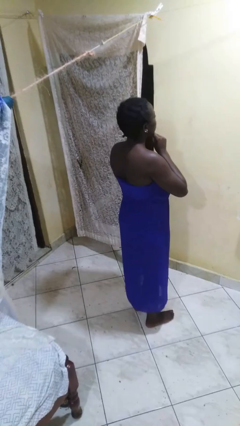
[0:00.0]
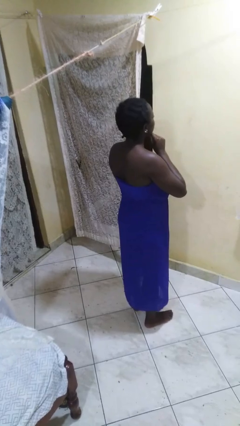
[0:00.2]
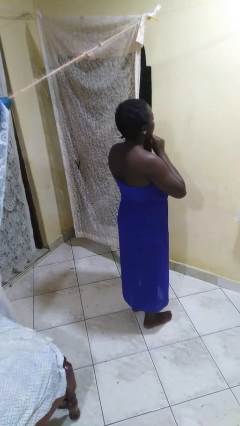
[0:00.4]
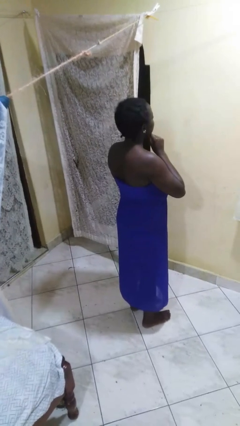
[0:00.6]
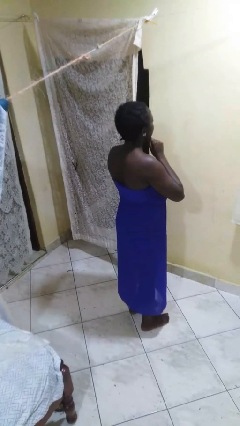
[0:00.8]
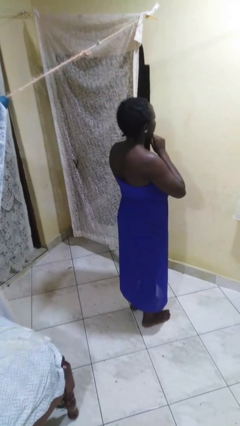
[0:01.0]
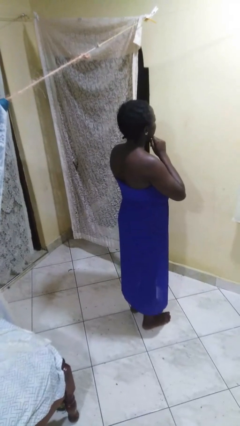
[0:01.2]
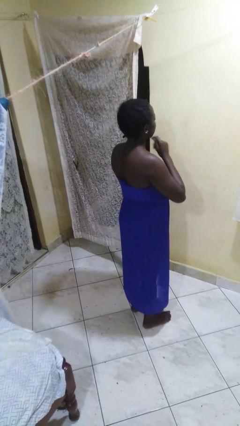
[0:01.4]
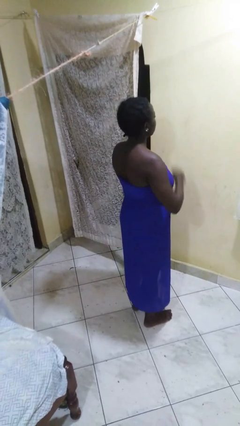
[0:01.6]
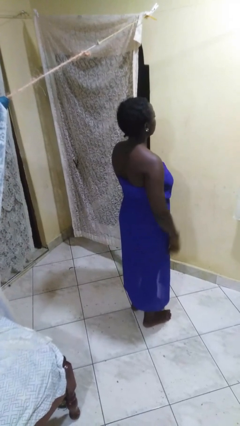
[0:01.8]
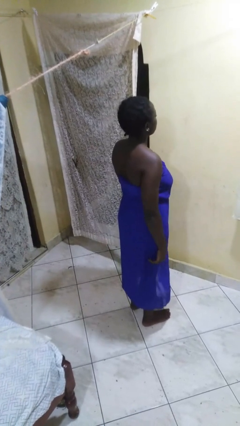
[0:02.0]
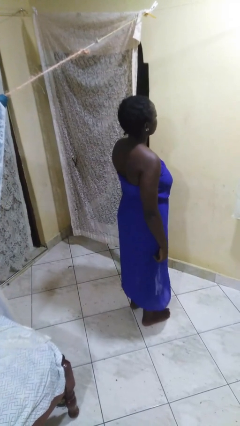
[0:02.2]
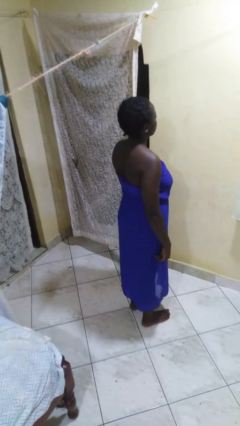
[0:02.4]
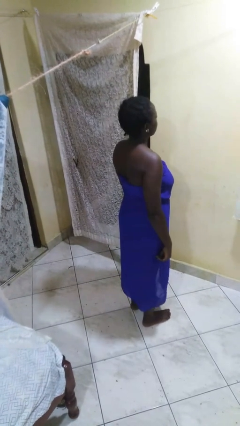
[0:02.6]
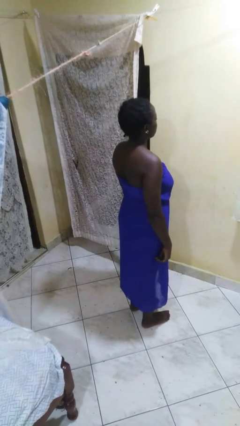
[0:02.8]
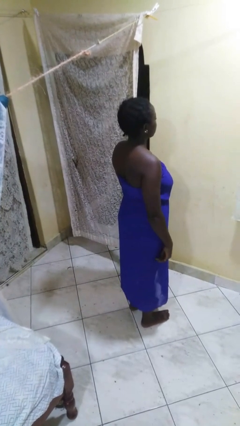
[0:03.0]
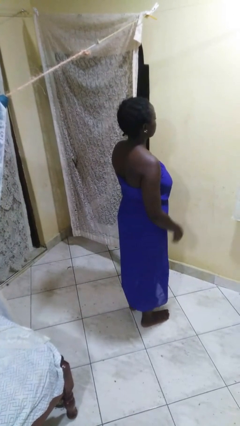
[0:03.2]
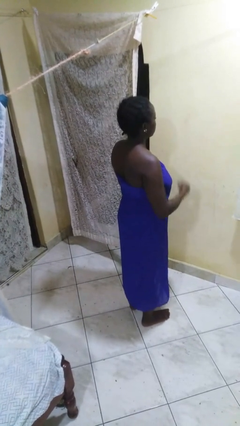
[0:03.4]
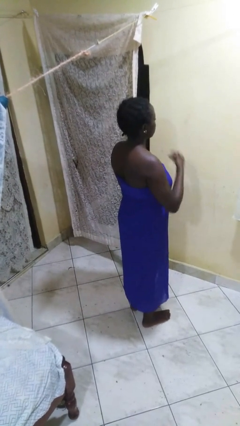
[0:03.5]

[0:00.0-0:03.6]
person strokes chin

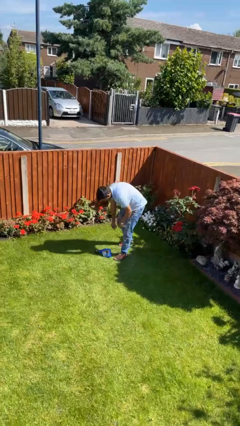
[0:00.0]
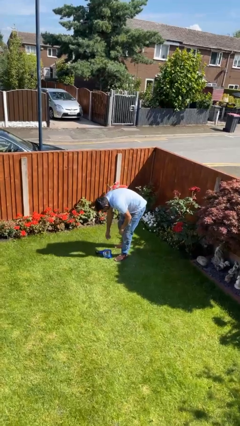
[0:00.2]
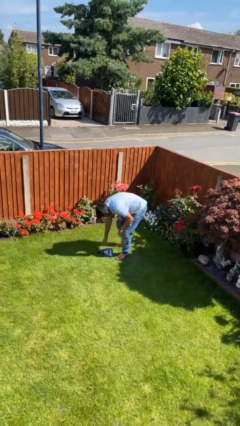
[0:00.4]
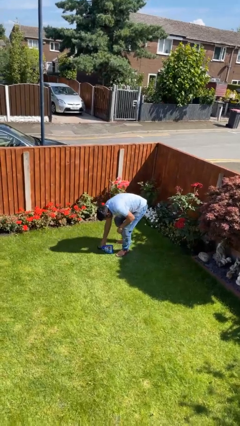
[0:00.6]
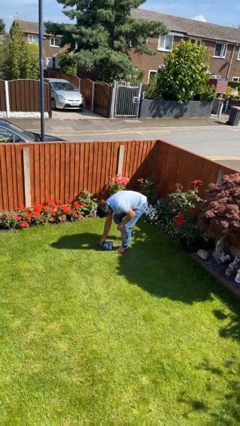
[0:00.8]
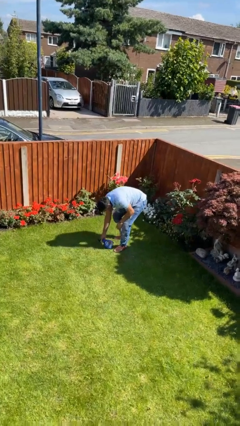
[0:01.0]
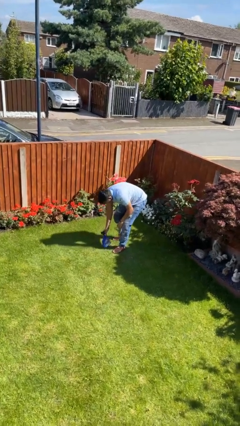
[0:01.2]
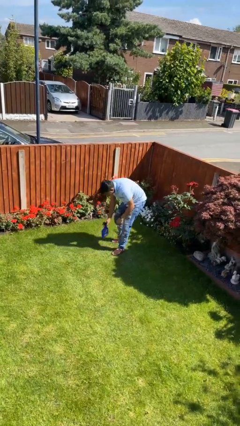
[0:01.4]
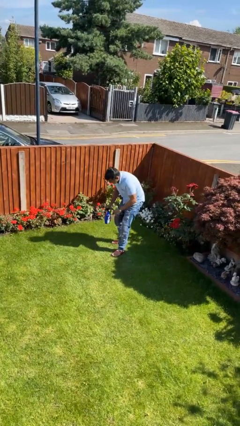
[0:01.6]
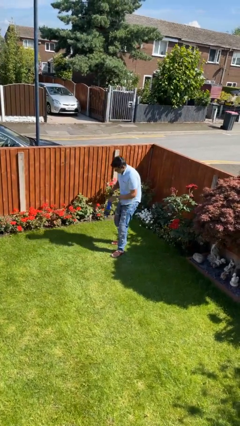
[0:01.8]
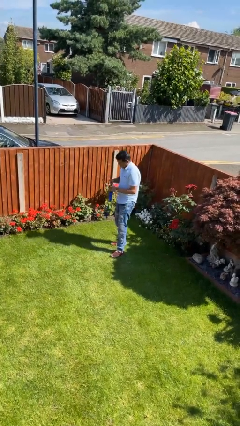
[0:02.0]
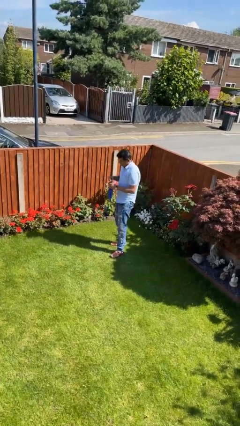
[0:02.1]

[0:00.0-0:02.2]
person picks up object from floor

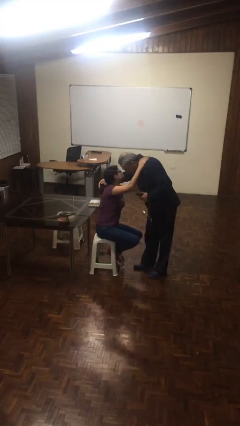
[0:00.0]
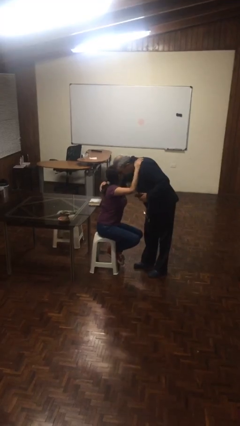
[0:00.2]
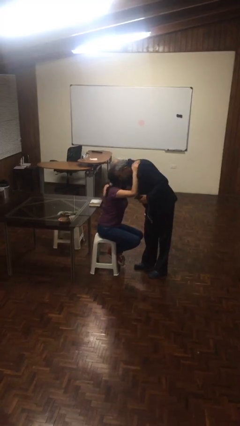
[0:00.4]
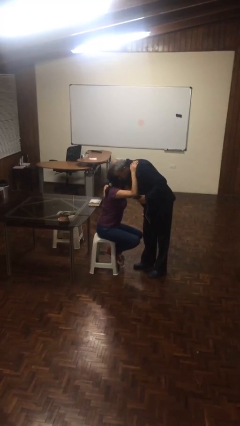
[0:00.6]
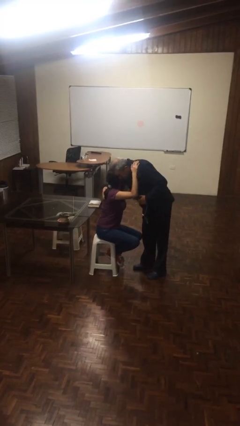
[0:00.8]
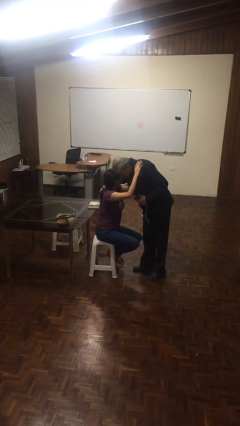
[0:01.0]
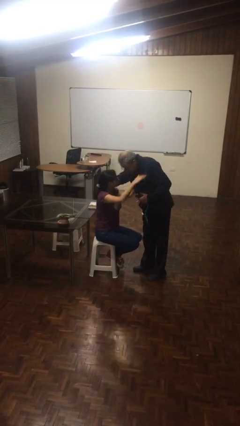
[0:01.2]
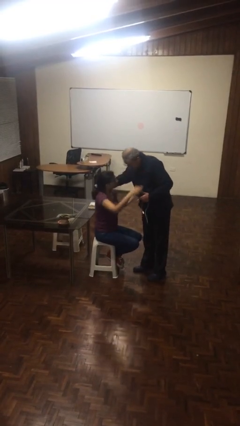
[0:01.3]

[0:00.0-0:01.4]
person embraces person

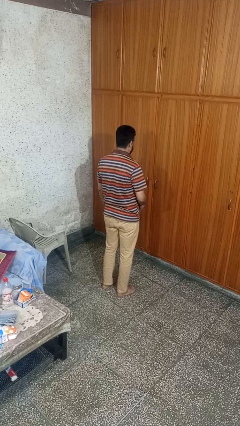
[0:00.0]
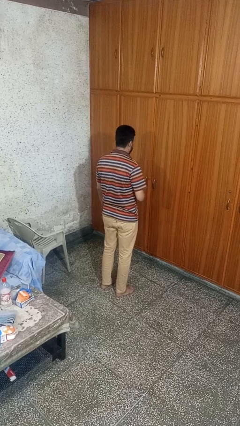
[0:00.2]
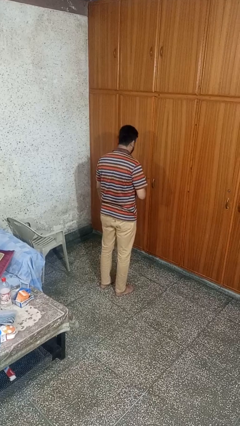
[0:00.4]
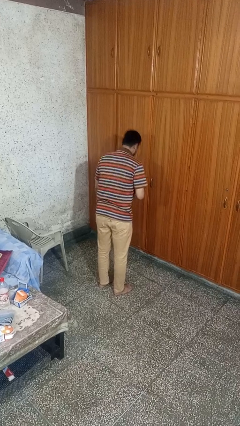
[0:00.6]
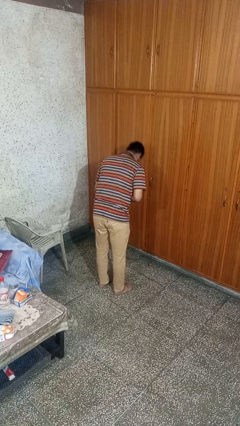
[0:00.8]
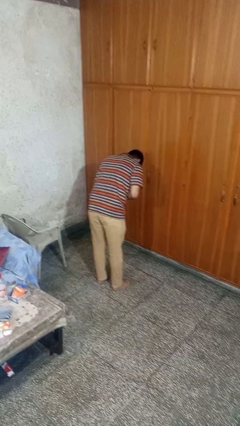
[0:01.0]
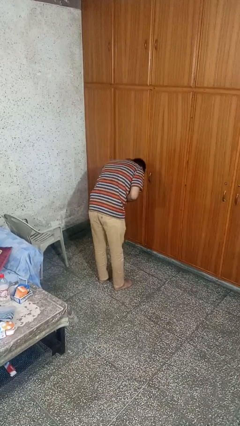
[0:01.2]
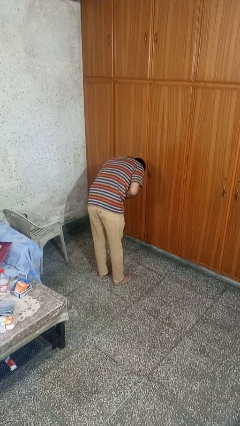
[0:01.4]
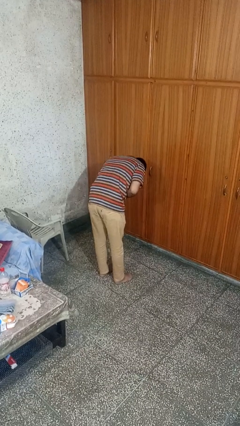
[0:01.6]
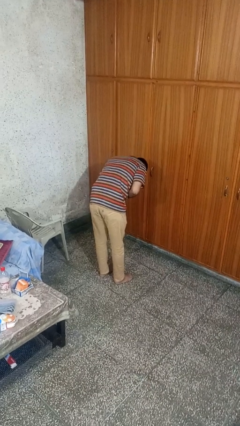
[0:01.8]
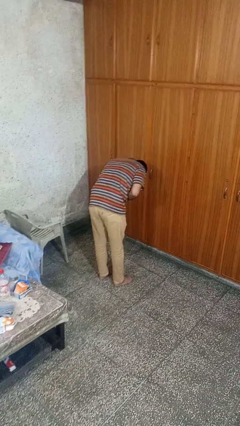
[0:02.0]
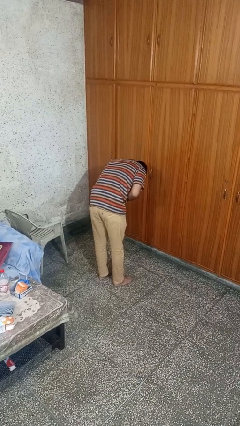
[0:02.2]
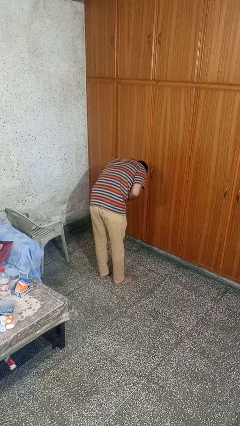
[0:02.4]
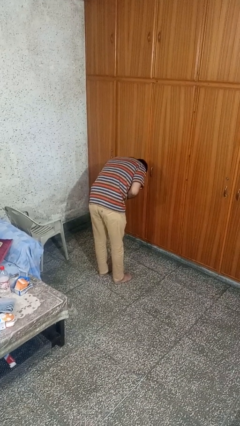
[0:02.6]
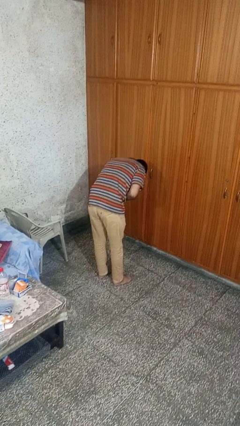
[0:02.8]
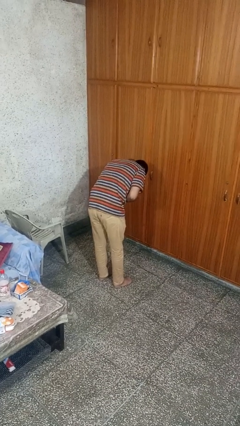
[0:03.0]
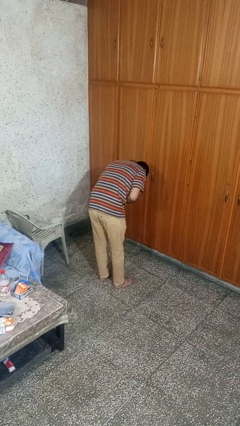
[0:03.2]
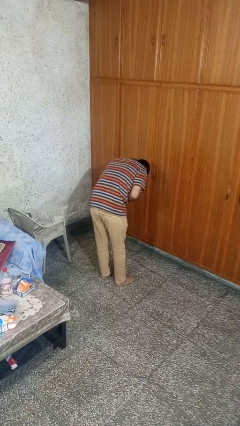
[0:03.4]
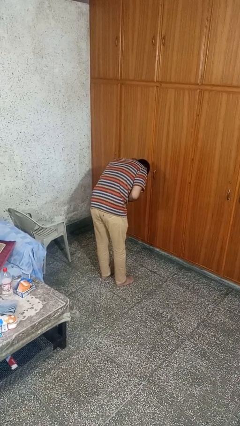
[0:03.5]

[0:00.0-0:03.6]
person bows

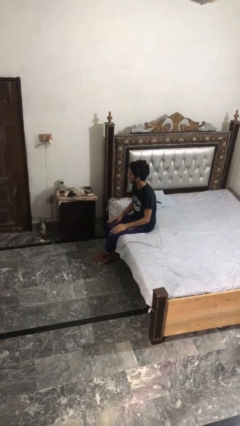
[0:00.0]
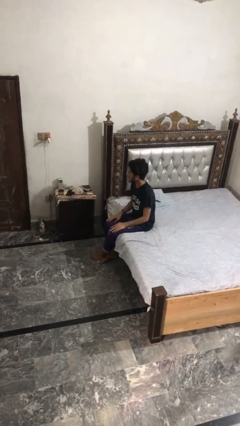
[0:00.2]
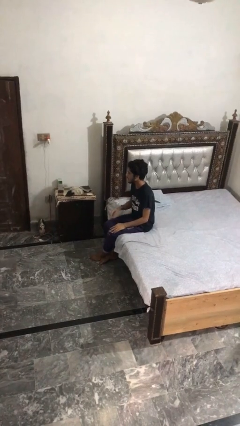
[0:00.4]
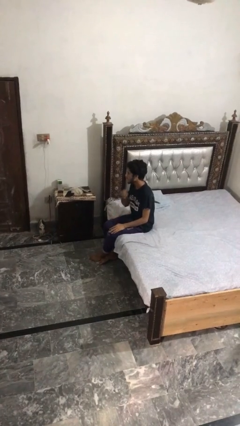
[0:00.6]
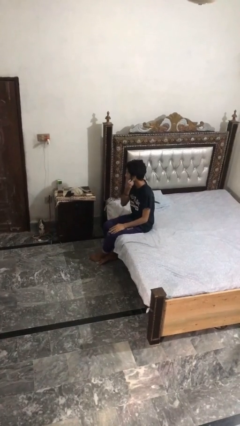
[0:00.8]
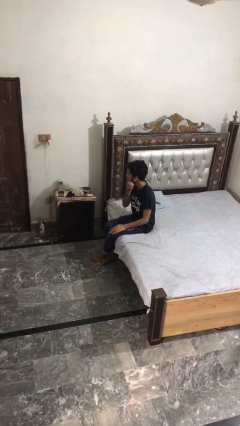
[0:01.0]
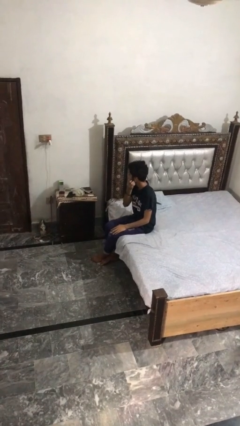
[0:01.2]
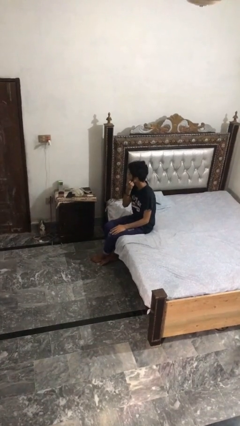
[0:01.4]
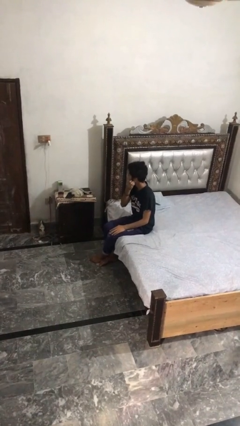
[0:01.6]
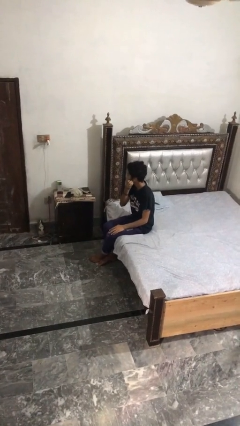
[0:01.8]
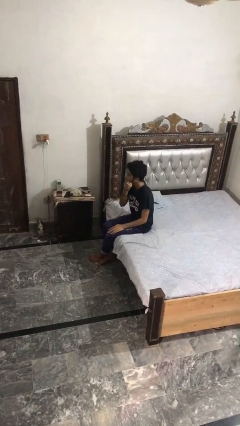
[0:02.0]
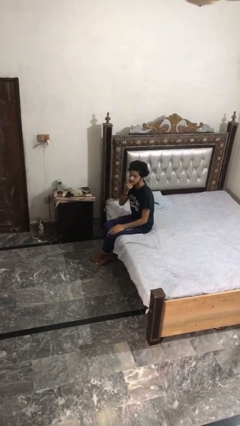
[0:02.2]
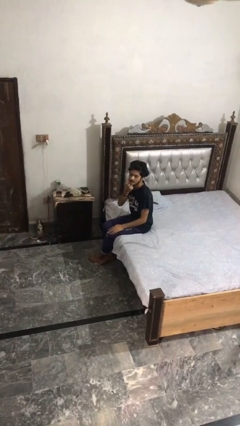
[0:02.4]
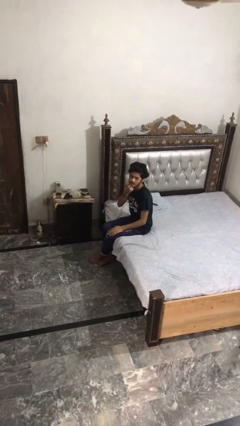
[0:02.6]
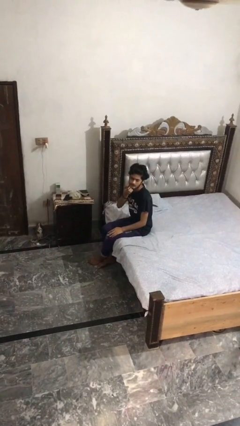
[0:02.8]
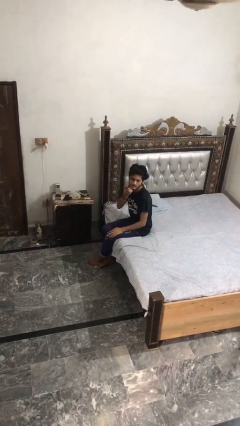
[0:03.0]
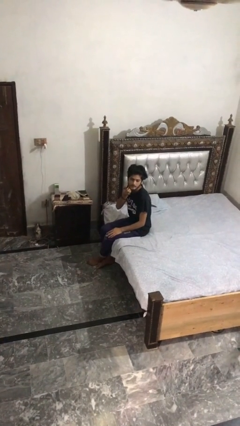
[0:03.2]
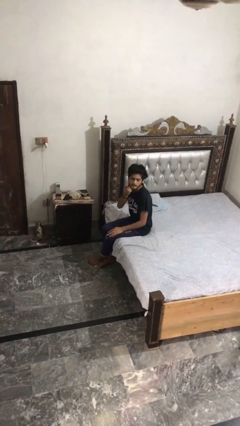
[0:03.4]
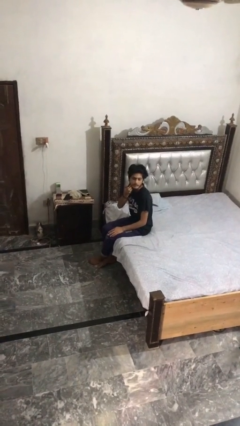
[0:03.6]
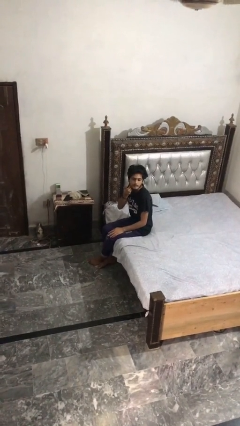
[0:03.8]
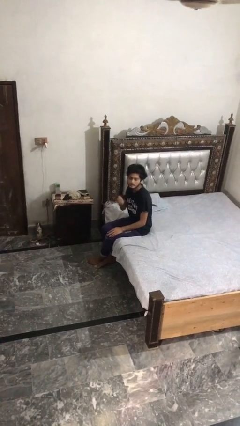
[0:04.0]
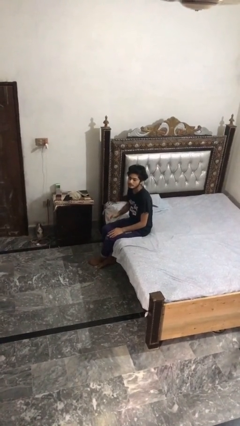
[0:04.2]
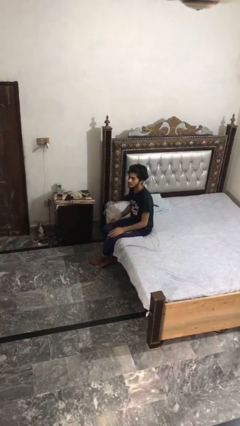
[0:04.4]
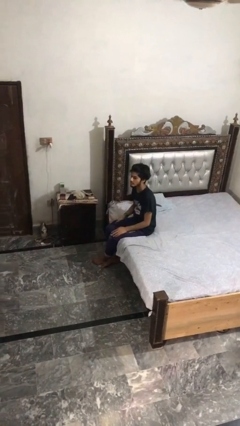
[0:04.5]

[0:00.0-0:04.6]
person scratches face

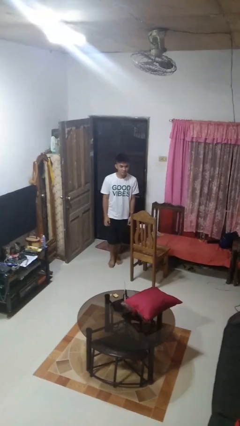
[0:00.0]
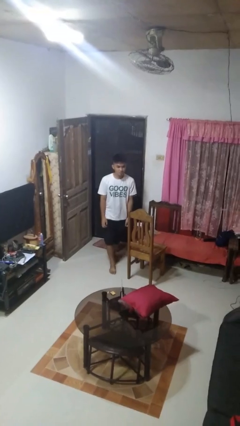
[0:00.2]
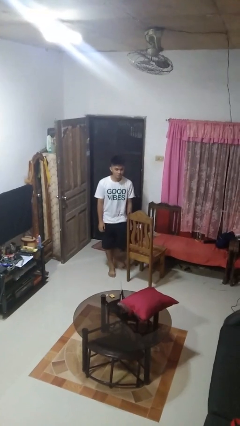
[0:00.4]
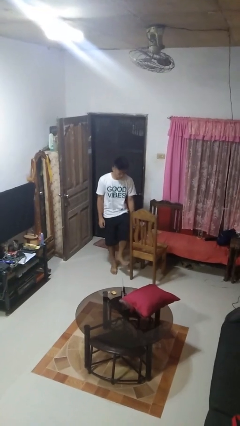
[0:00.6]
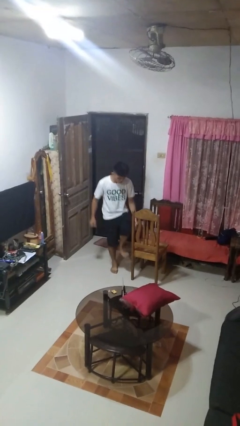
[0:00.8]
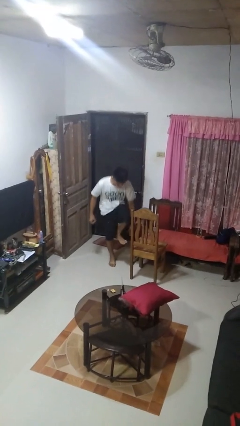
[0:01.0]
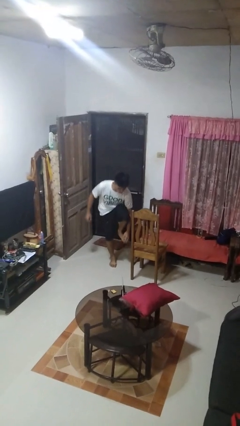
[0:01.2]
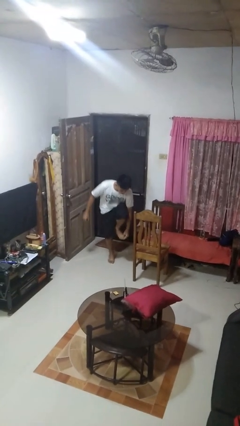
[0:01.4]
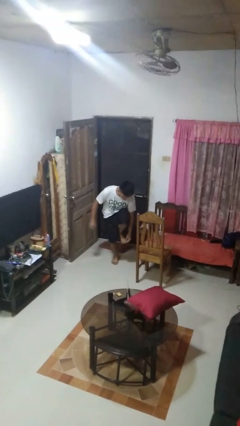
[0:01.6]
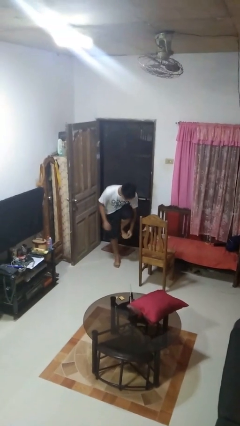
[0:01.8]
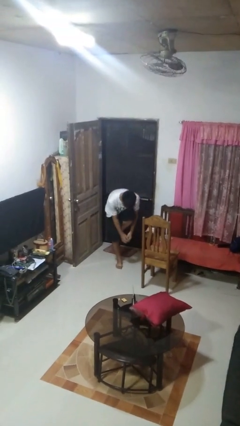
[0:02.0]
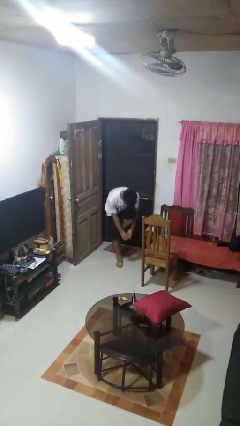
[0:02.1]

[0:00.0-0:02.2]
person stubs toe
